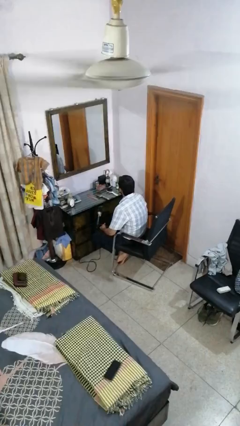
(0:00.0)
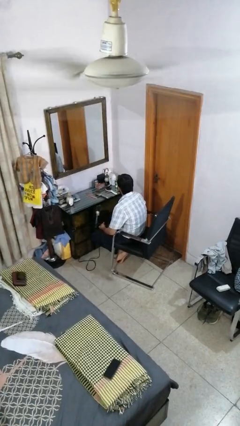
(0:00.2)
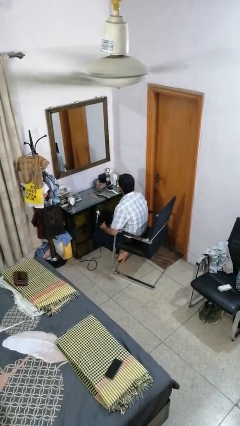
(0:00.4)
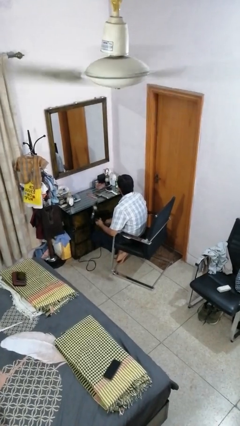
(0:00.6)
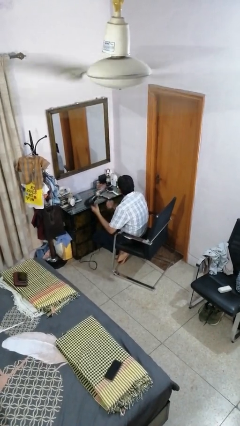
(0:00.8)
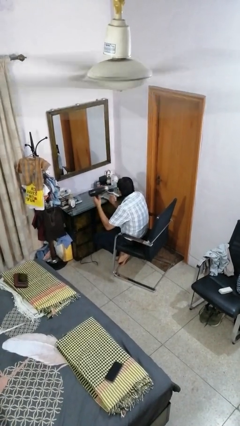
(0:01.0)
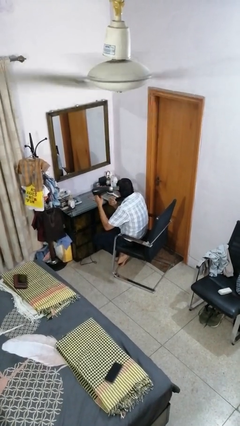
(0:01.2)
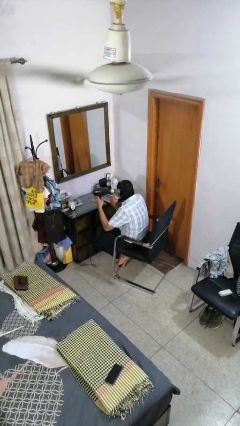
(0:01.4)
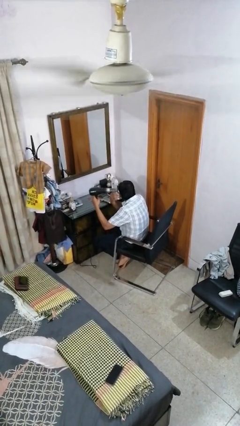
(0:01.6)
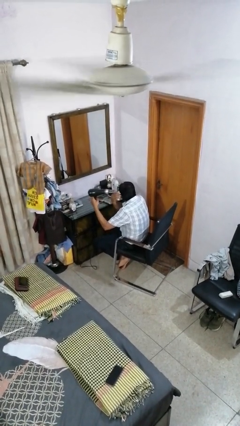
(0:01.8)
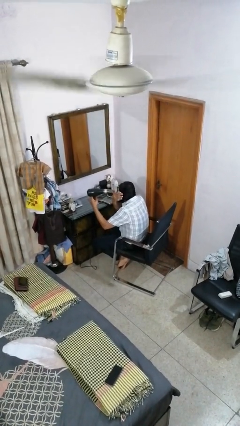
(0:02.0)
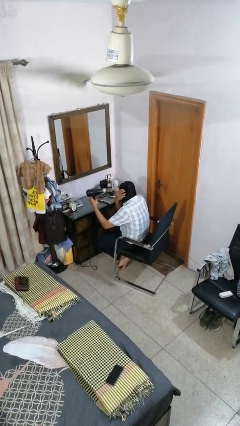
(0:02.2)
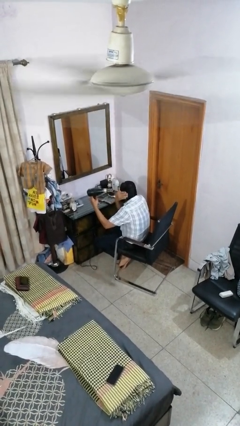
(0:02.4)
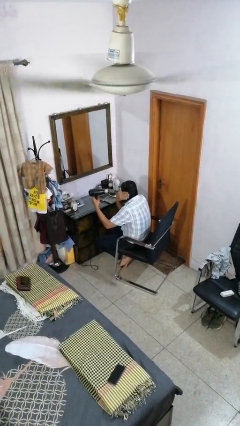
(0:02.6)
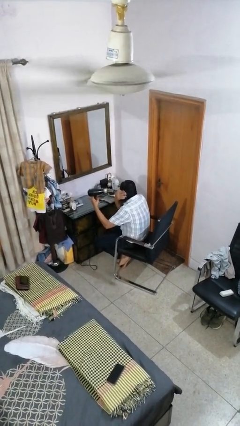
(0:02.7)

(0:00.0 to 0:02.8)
person dries hair with hairdryer

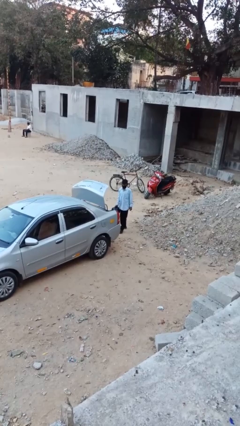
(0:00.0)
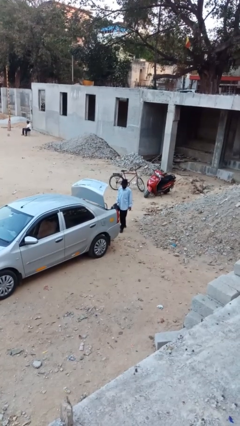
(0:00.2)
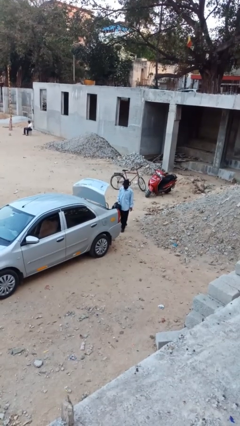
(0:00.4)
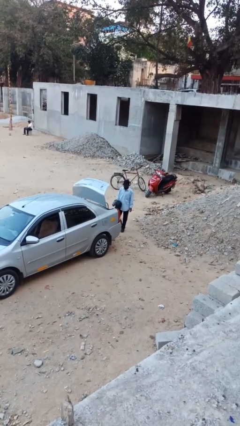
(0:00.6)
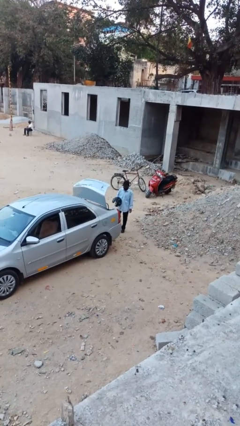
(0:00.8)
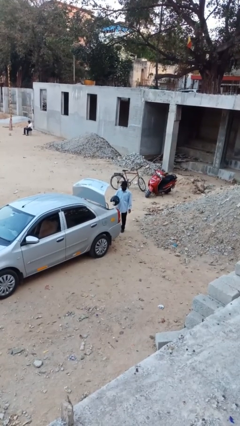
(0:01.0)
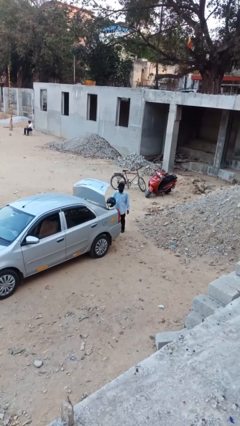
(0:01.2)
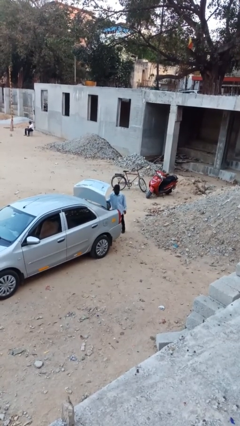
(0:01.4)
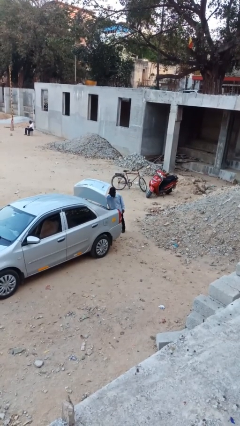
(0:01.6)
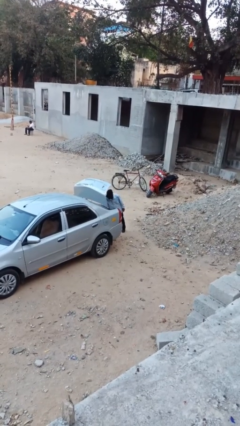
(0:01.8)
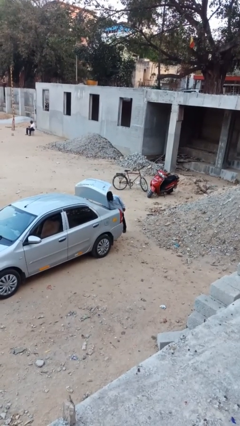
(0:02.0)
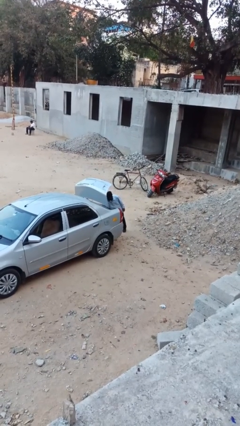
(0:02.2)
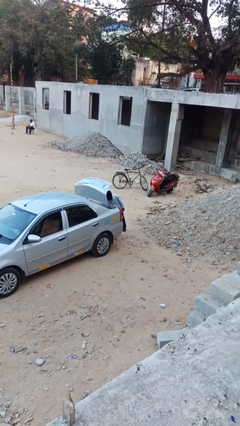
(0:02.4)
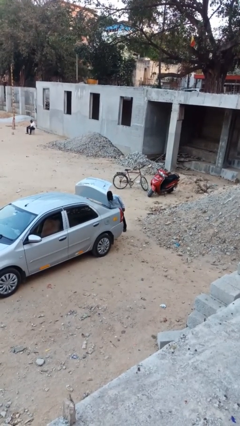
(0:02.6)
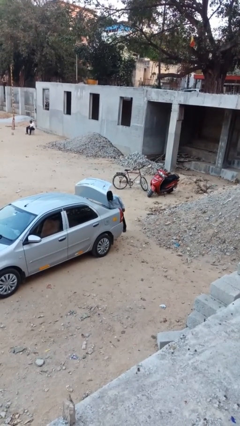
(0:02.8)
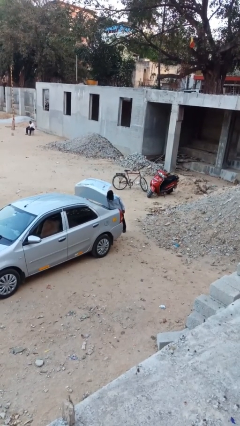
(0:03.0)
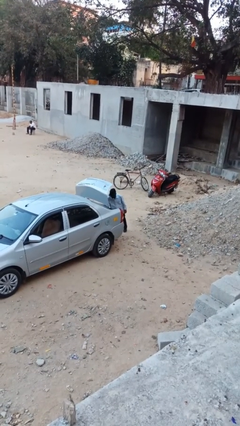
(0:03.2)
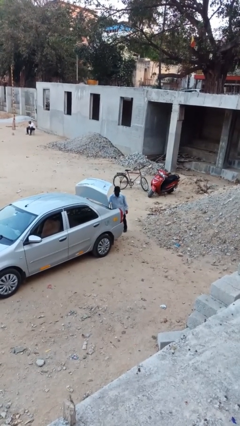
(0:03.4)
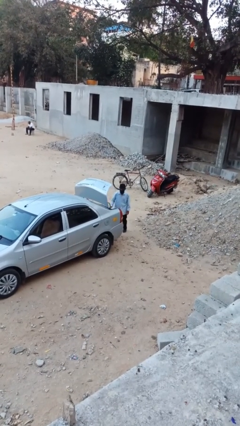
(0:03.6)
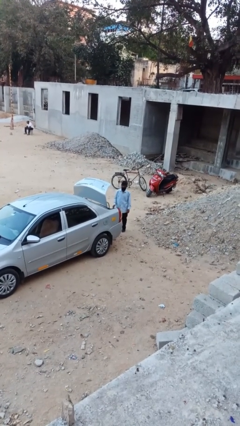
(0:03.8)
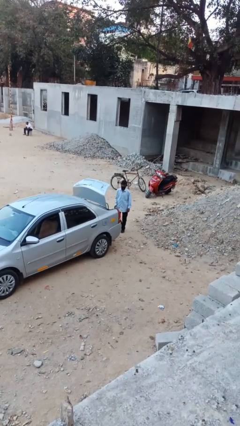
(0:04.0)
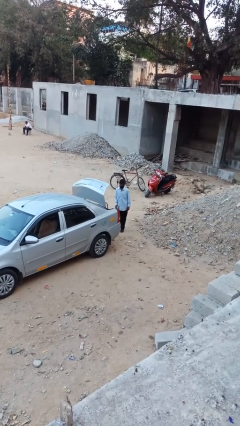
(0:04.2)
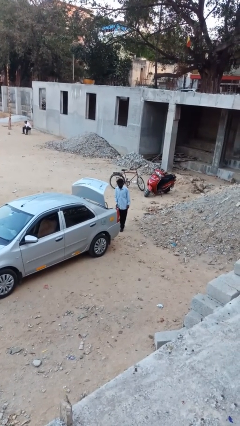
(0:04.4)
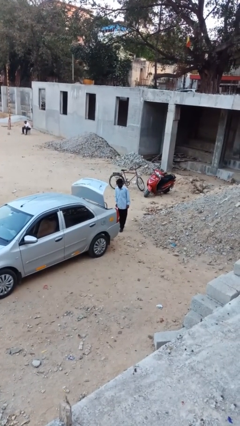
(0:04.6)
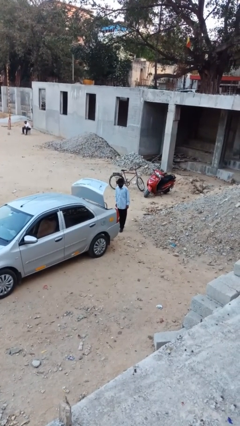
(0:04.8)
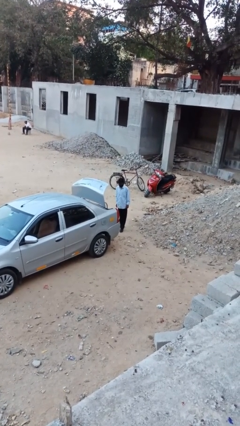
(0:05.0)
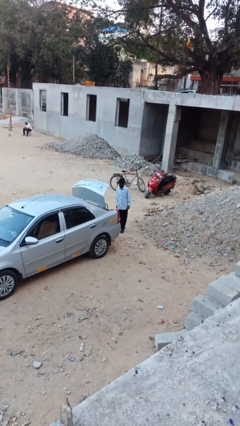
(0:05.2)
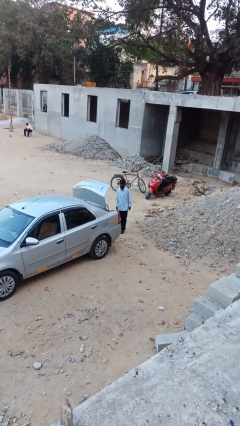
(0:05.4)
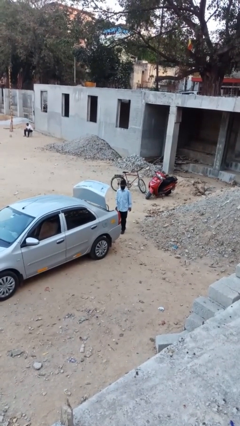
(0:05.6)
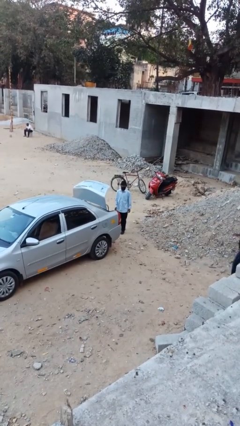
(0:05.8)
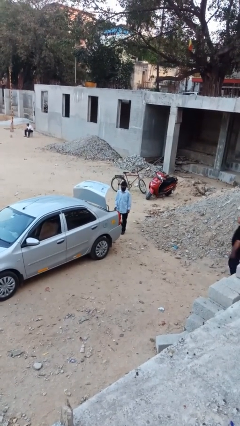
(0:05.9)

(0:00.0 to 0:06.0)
person loads car

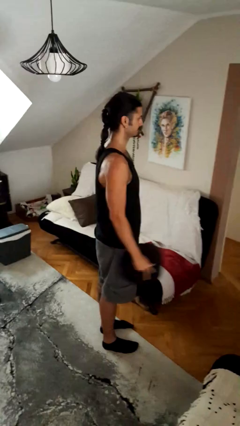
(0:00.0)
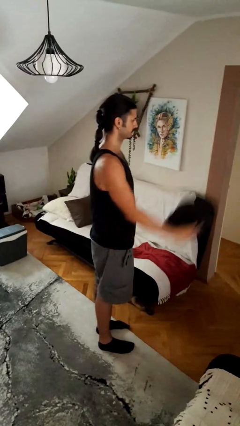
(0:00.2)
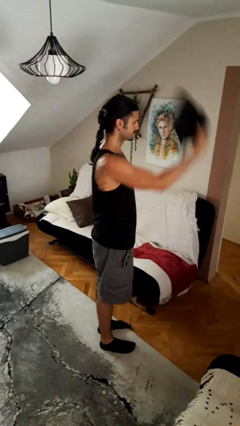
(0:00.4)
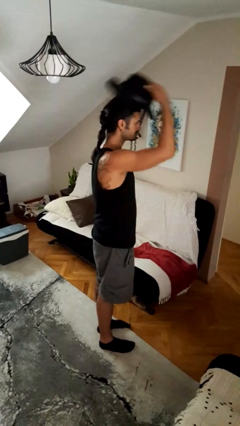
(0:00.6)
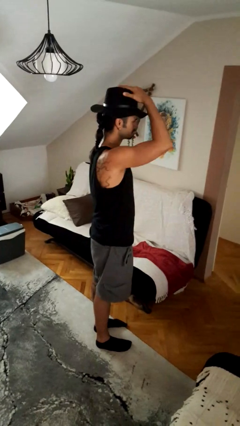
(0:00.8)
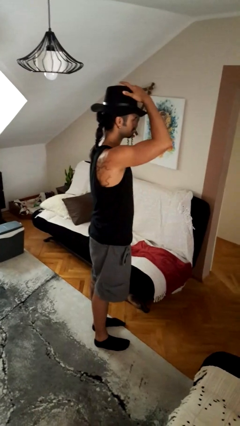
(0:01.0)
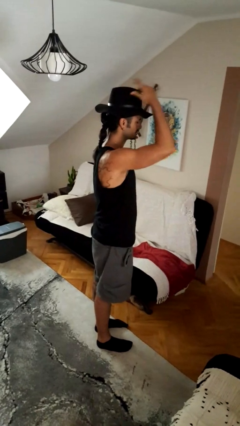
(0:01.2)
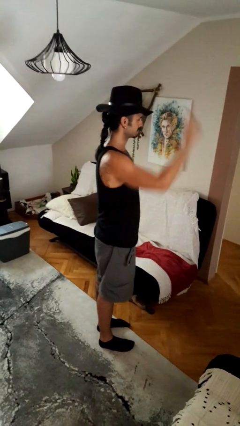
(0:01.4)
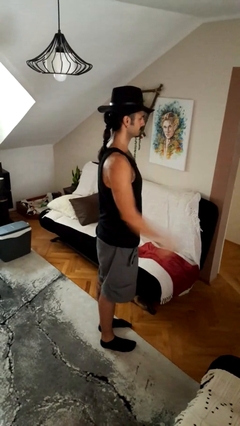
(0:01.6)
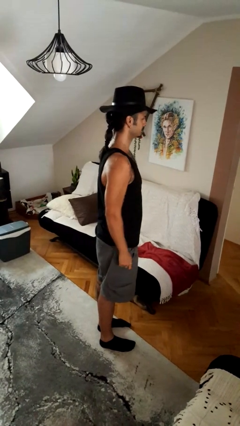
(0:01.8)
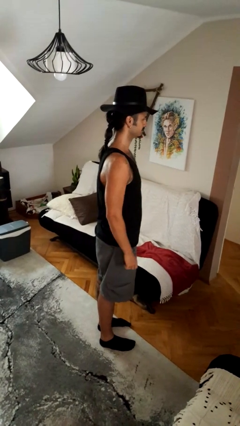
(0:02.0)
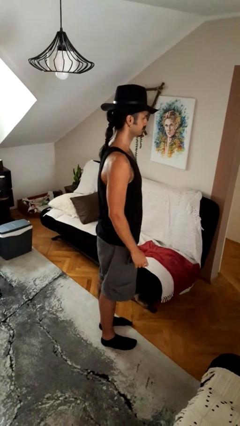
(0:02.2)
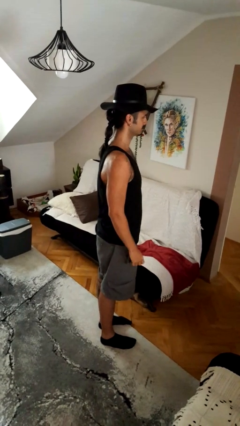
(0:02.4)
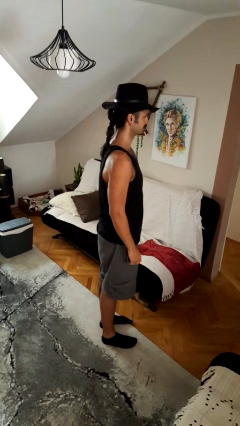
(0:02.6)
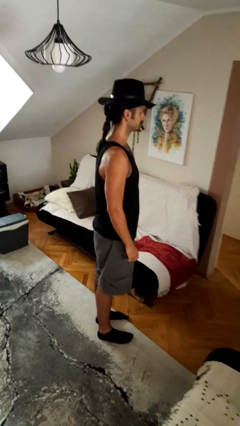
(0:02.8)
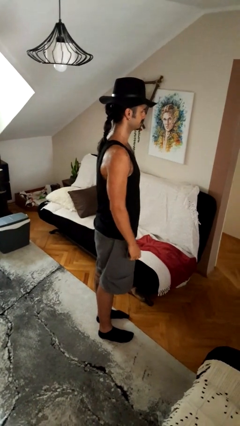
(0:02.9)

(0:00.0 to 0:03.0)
person puts on hat

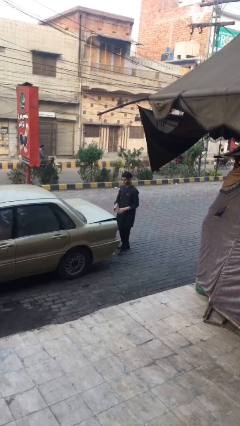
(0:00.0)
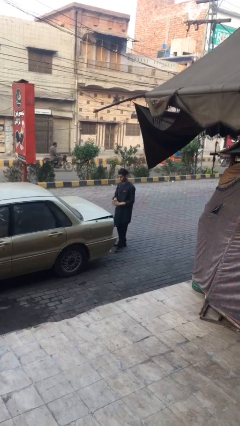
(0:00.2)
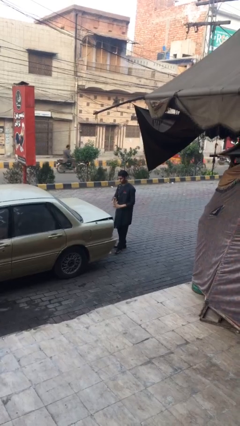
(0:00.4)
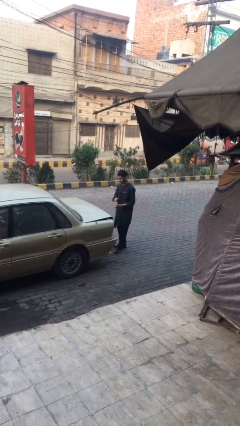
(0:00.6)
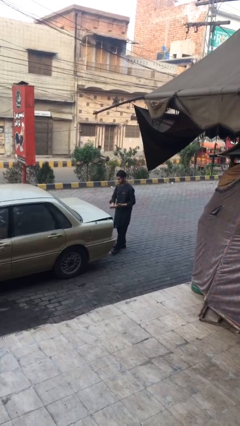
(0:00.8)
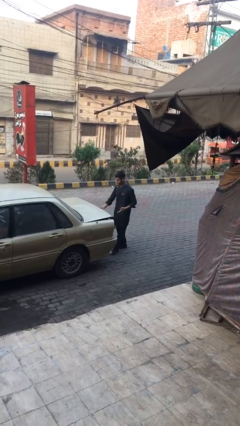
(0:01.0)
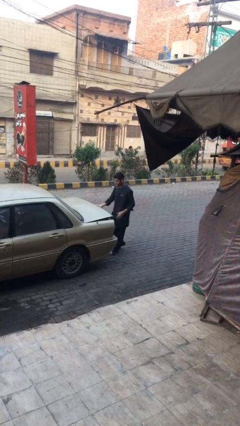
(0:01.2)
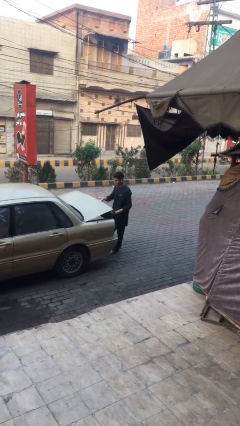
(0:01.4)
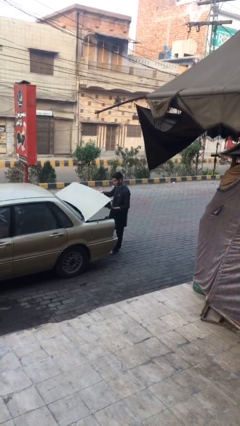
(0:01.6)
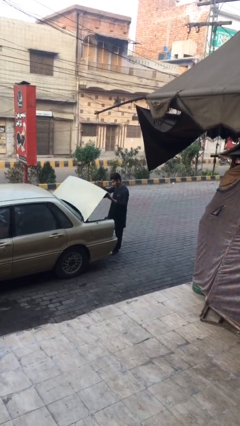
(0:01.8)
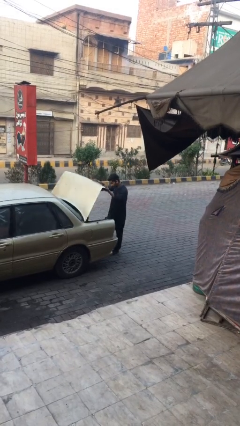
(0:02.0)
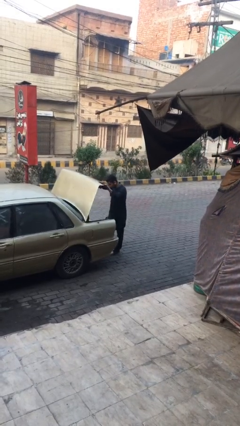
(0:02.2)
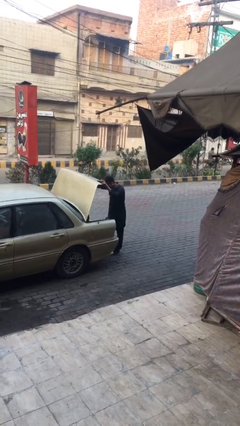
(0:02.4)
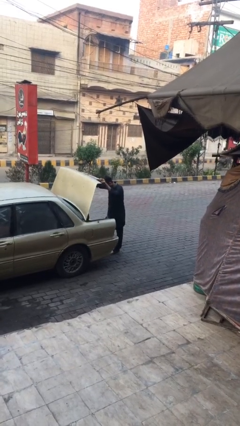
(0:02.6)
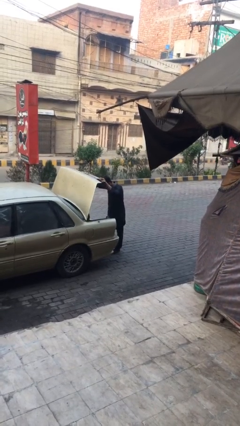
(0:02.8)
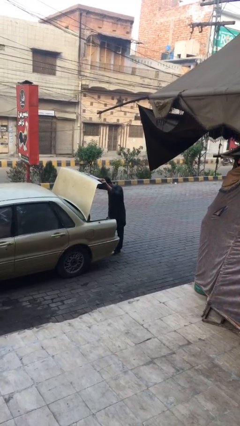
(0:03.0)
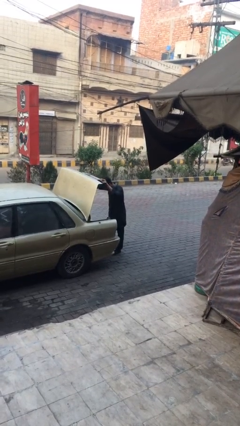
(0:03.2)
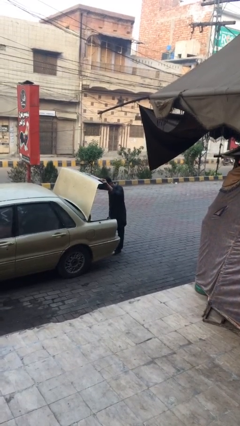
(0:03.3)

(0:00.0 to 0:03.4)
person opens car trunk

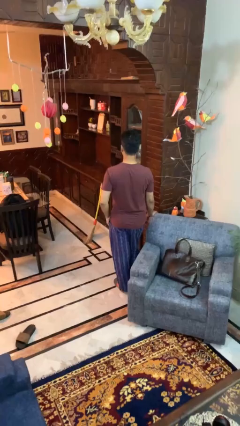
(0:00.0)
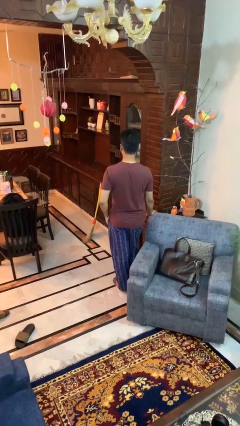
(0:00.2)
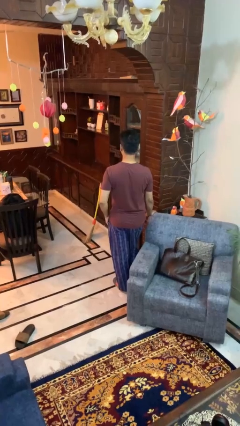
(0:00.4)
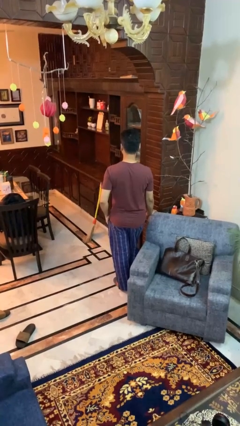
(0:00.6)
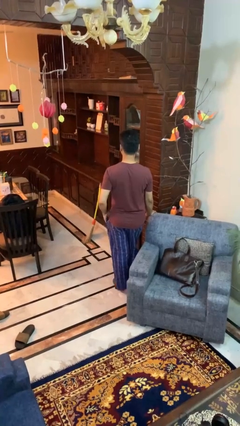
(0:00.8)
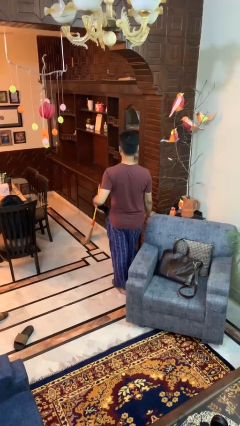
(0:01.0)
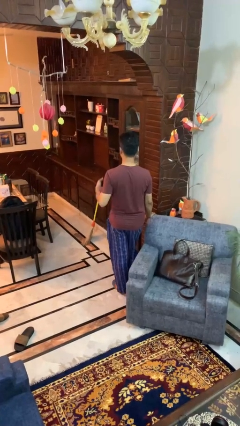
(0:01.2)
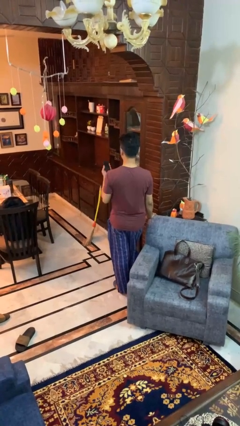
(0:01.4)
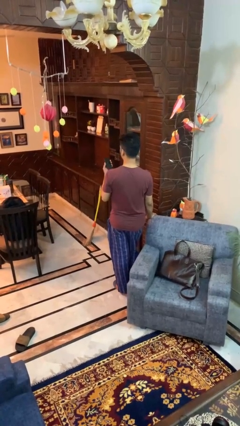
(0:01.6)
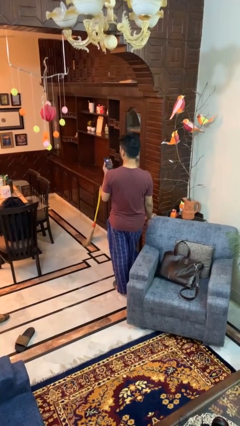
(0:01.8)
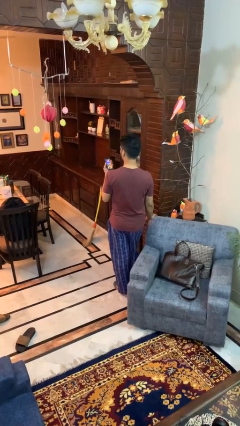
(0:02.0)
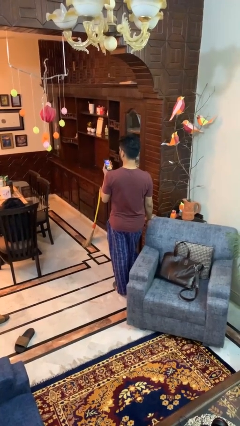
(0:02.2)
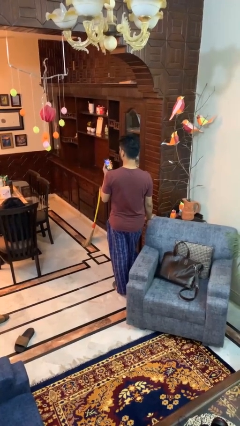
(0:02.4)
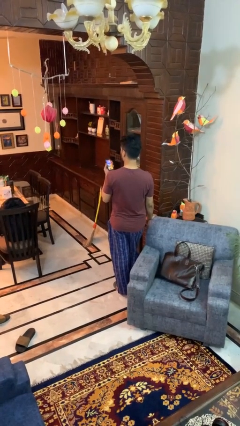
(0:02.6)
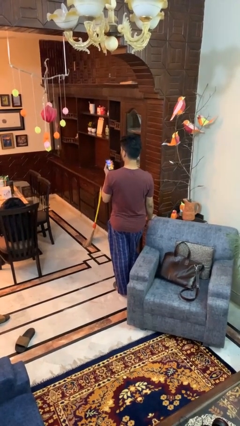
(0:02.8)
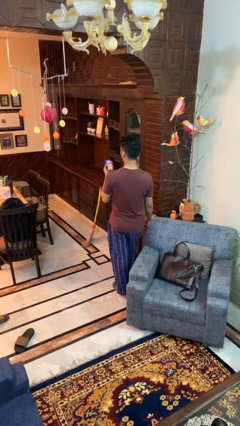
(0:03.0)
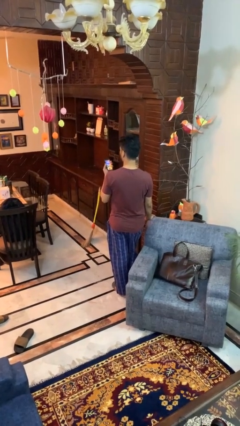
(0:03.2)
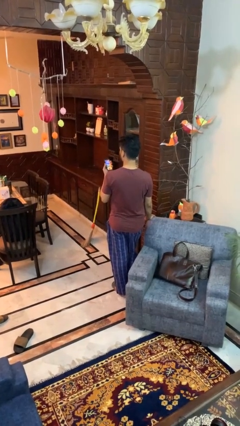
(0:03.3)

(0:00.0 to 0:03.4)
person takes phone from pocket
